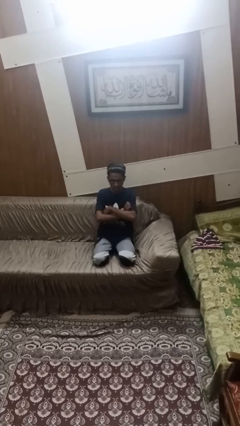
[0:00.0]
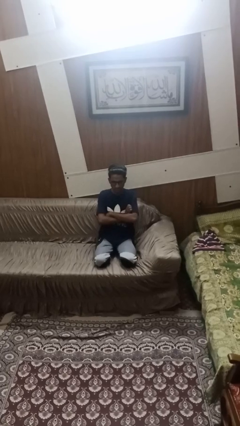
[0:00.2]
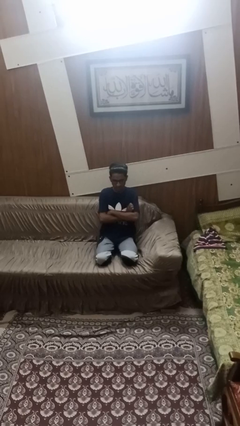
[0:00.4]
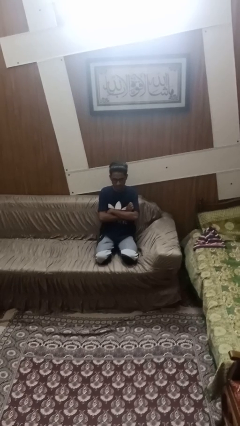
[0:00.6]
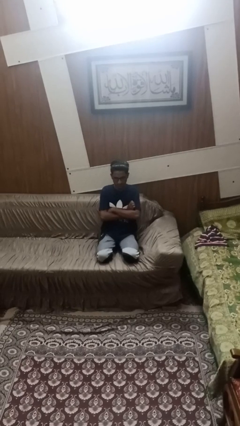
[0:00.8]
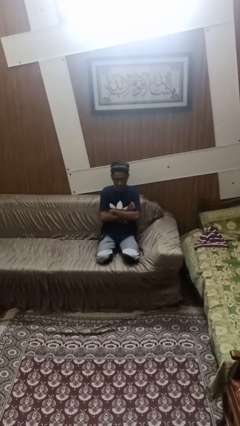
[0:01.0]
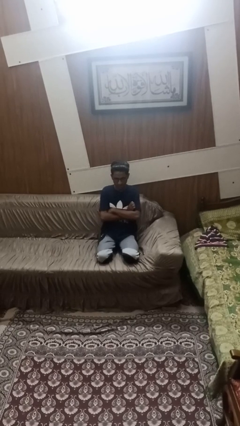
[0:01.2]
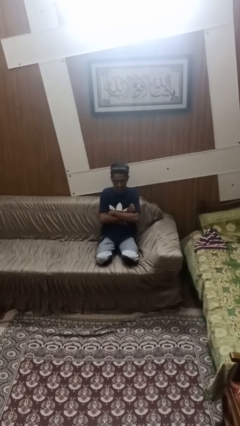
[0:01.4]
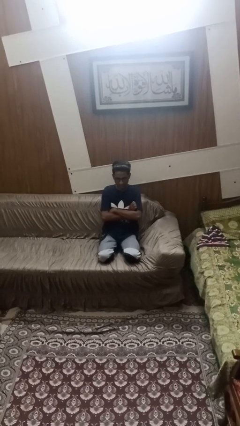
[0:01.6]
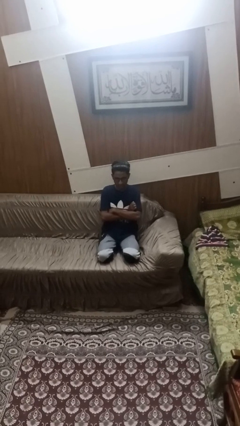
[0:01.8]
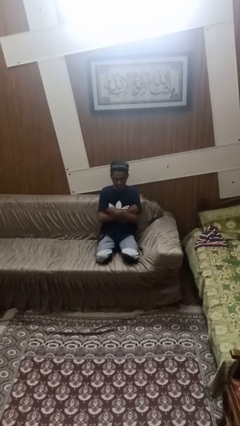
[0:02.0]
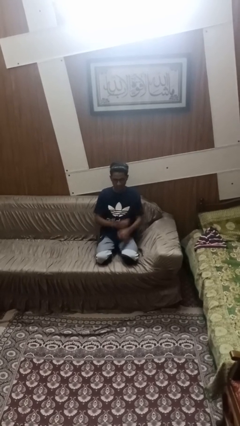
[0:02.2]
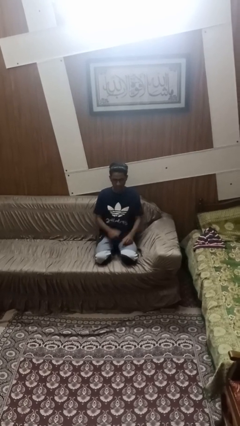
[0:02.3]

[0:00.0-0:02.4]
person crosses arms

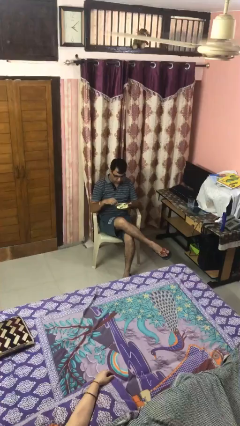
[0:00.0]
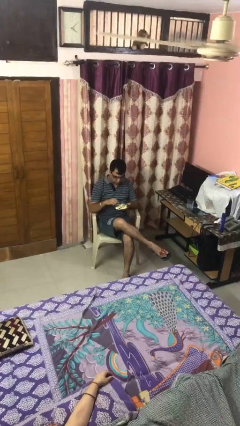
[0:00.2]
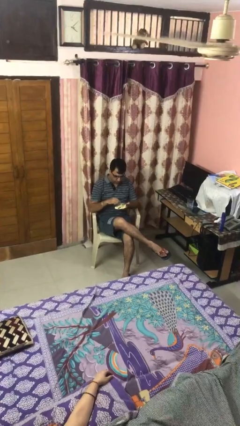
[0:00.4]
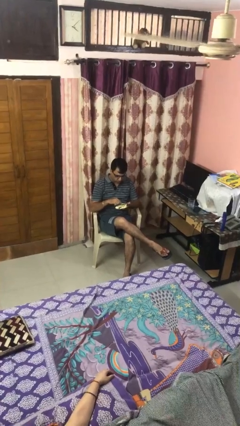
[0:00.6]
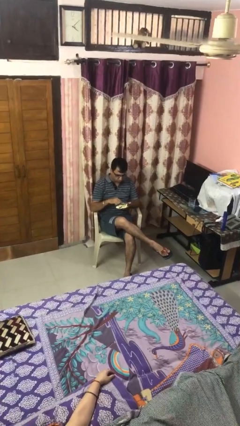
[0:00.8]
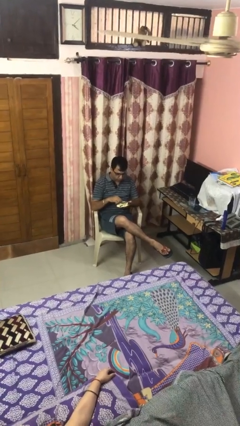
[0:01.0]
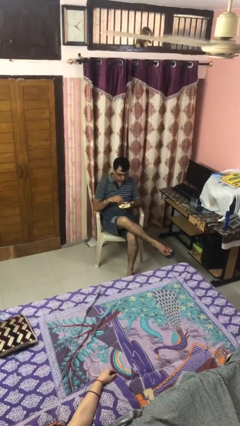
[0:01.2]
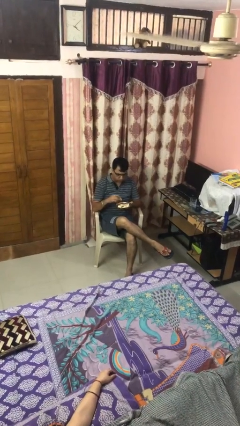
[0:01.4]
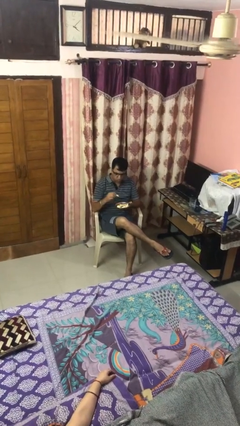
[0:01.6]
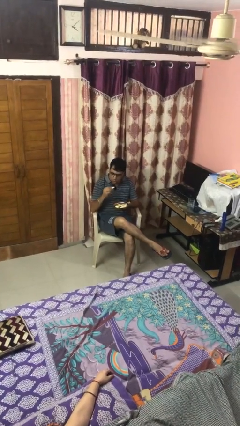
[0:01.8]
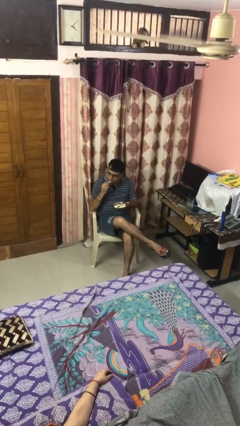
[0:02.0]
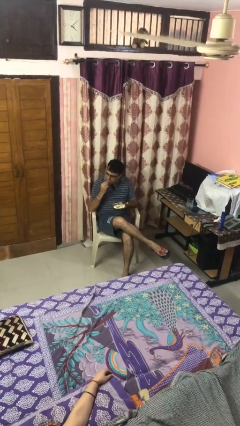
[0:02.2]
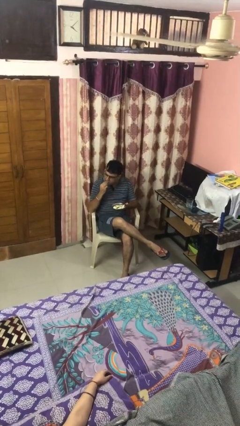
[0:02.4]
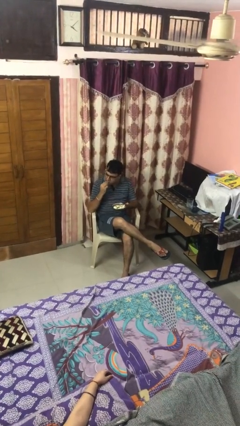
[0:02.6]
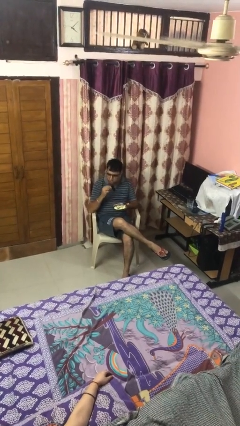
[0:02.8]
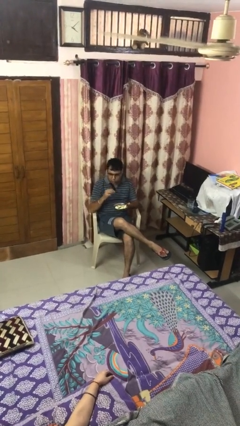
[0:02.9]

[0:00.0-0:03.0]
person eats with hands

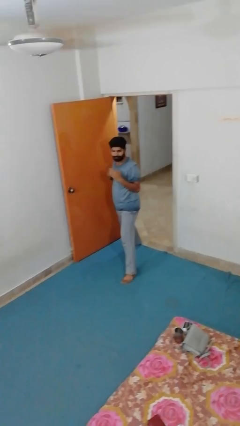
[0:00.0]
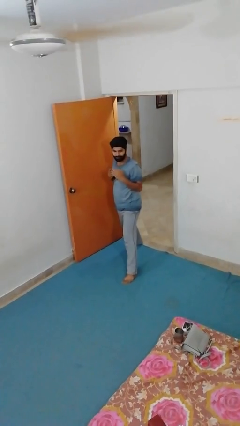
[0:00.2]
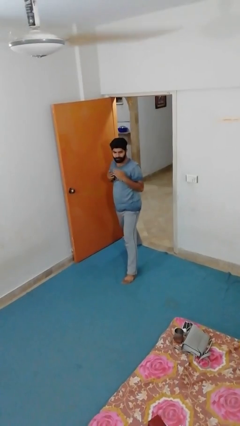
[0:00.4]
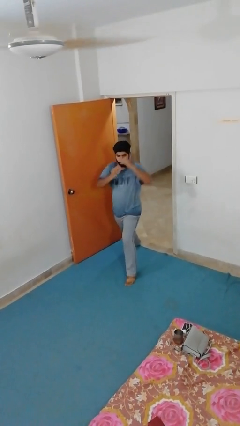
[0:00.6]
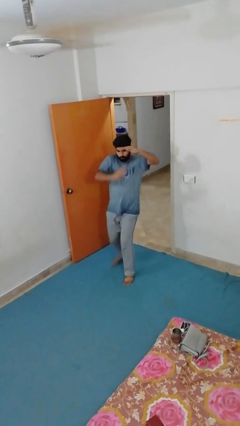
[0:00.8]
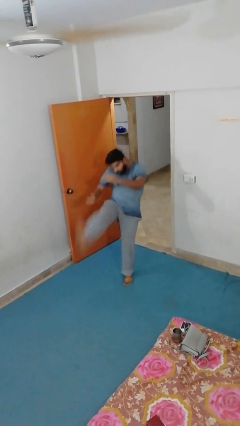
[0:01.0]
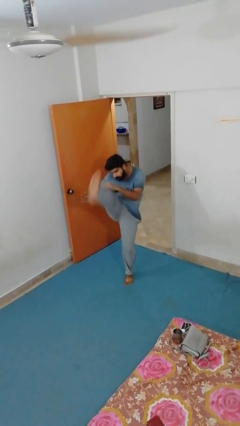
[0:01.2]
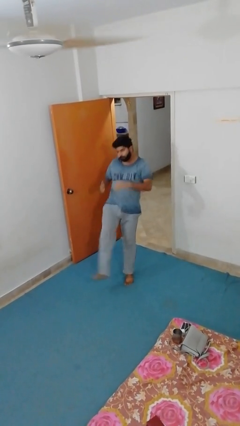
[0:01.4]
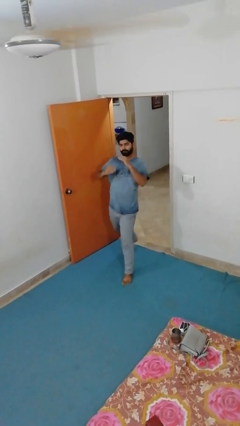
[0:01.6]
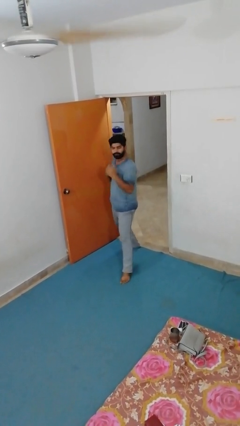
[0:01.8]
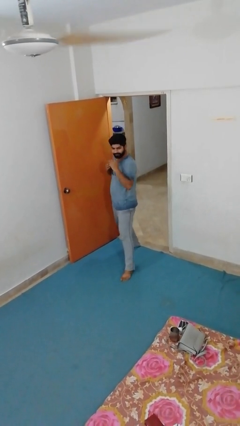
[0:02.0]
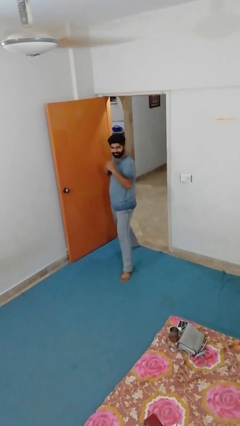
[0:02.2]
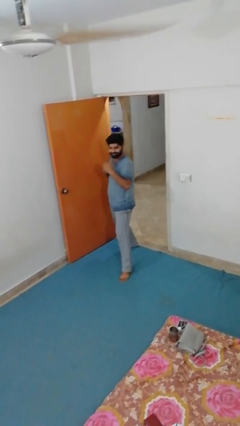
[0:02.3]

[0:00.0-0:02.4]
person karate kicks

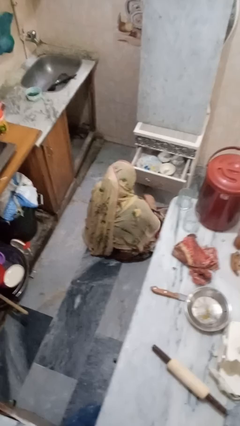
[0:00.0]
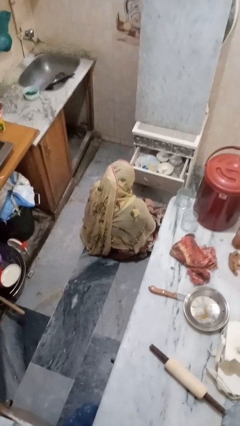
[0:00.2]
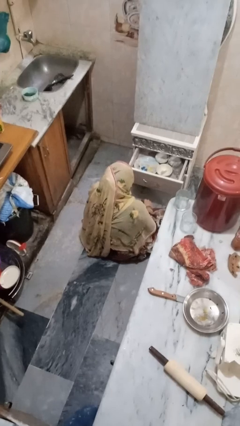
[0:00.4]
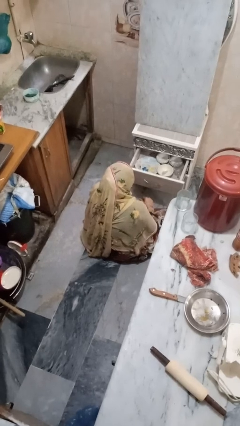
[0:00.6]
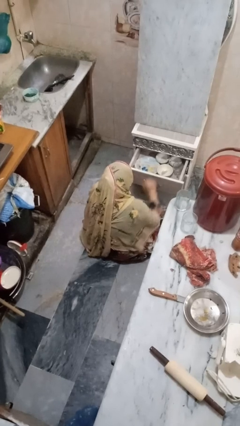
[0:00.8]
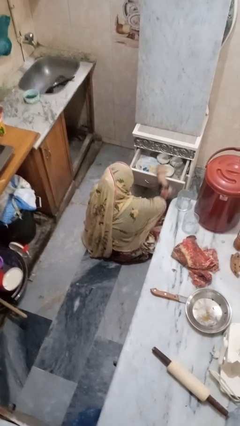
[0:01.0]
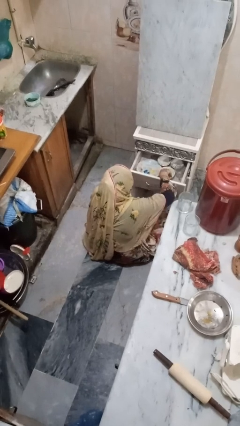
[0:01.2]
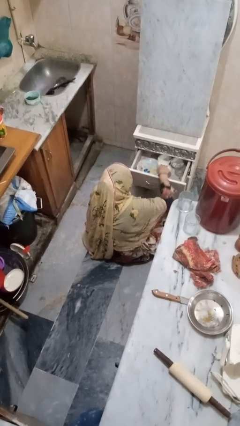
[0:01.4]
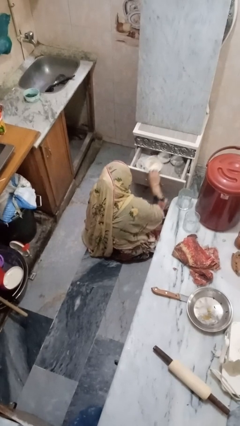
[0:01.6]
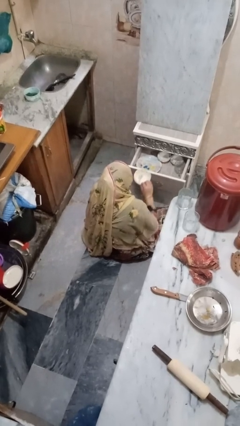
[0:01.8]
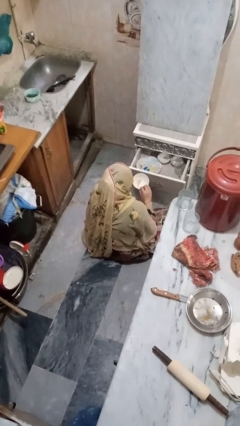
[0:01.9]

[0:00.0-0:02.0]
person takes object from kitchen drawer

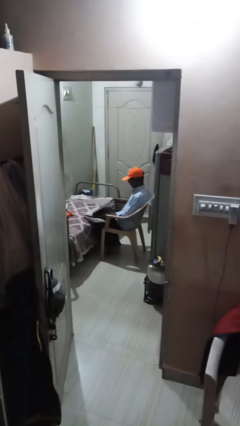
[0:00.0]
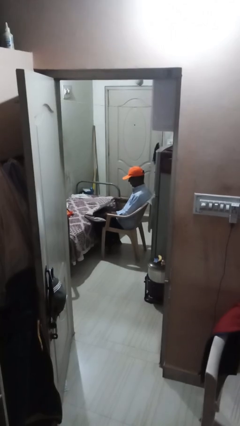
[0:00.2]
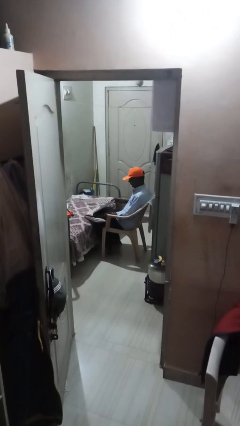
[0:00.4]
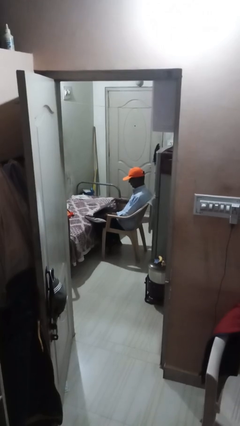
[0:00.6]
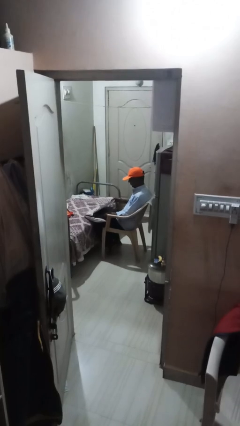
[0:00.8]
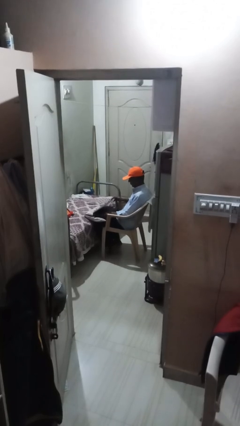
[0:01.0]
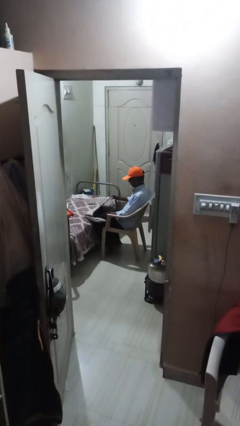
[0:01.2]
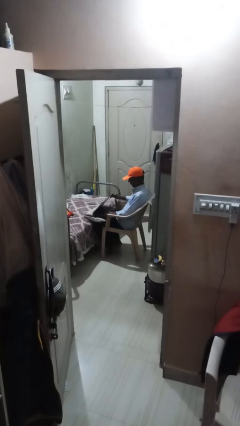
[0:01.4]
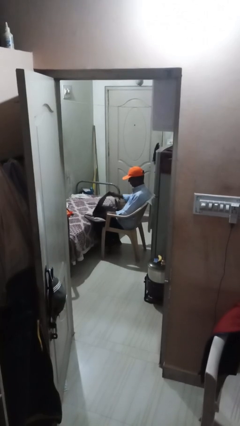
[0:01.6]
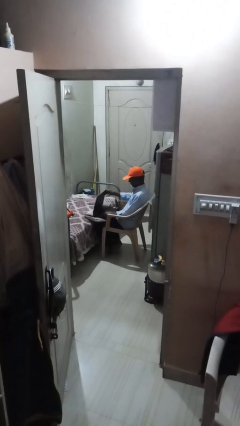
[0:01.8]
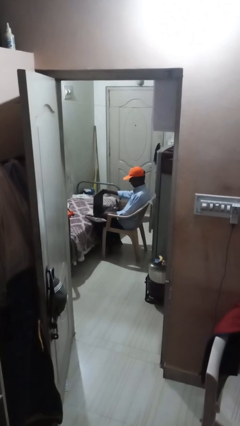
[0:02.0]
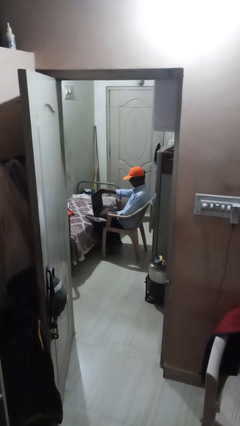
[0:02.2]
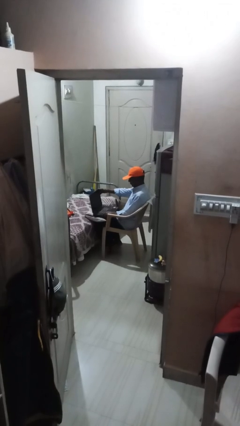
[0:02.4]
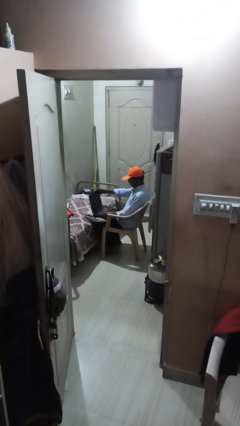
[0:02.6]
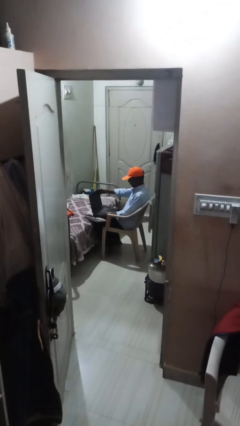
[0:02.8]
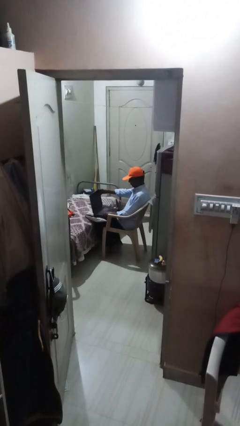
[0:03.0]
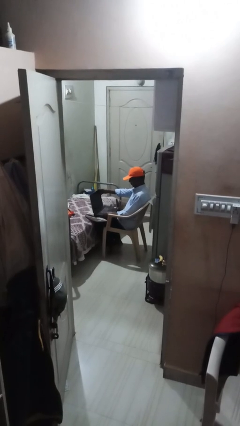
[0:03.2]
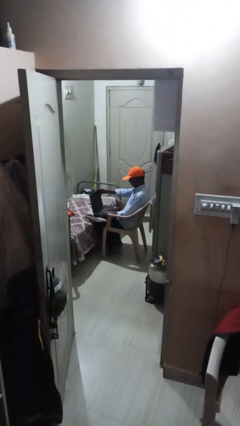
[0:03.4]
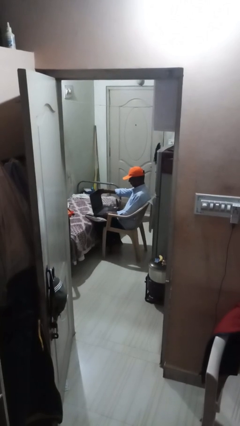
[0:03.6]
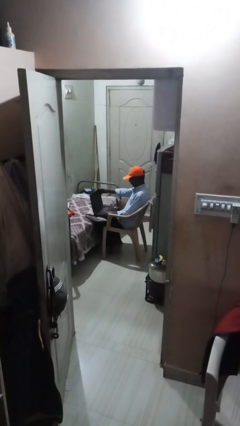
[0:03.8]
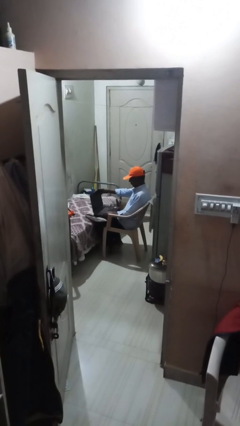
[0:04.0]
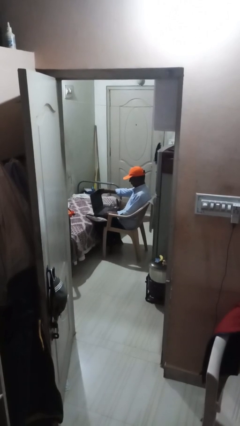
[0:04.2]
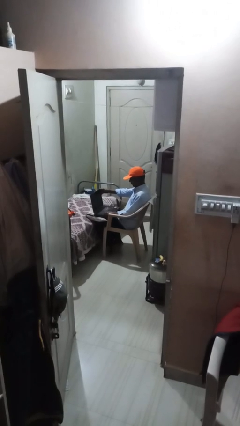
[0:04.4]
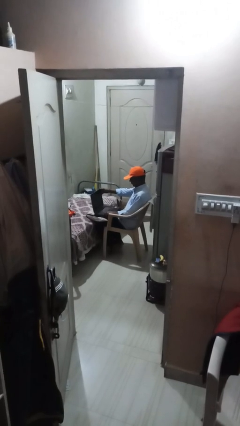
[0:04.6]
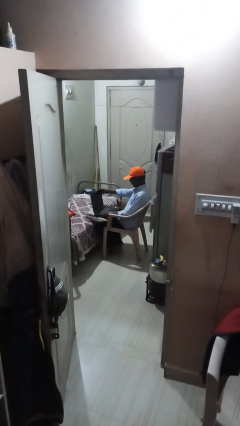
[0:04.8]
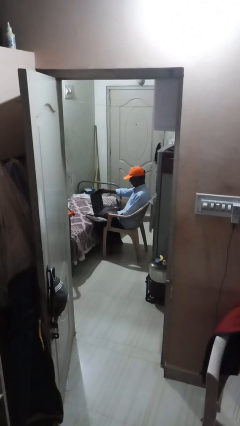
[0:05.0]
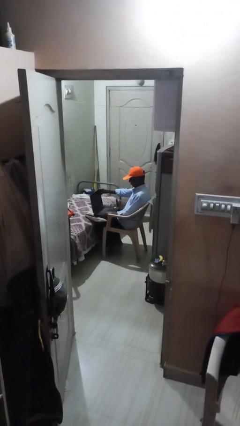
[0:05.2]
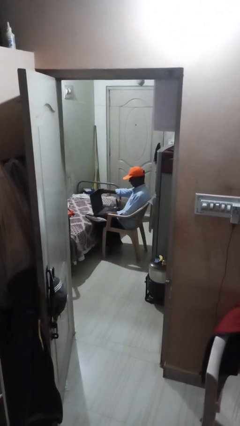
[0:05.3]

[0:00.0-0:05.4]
person interacts with laptop

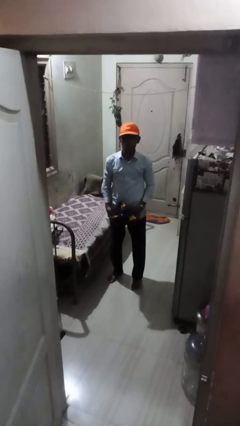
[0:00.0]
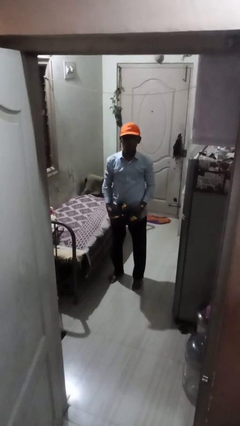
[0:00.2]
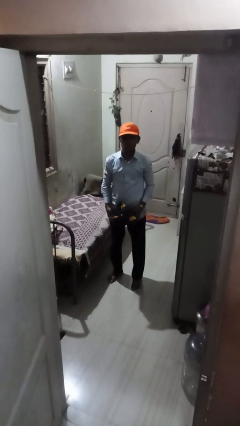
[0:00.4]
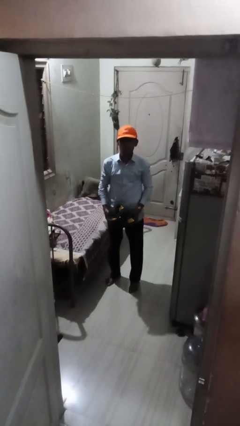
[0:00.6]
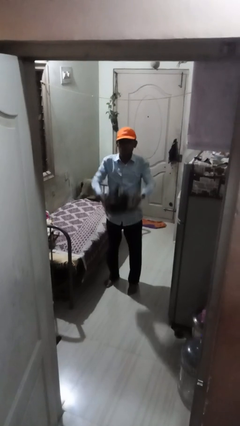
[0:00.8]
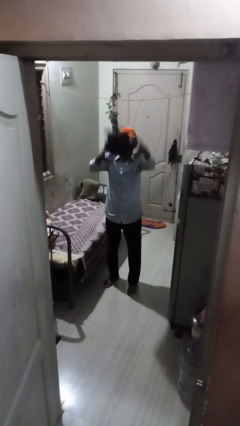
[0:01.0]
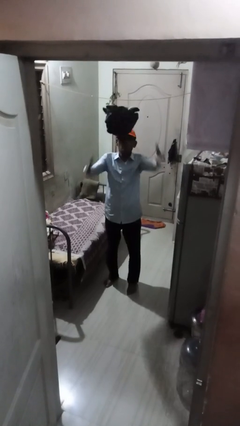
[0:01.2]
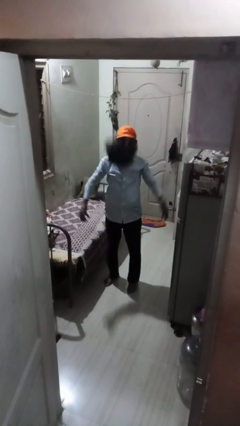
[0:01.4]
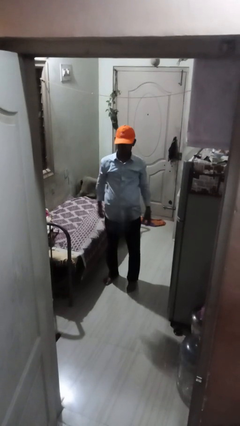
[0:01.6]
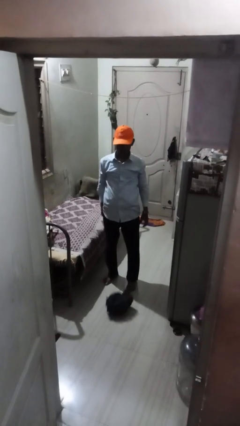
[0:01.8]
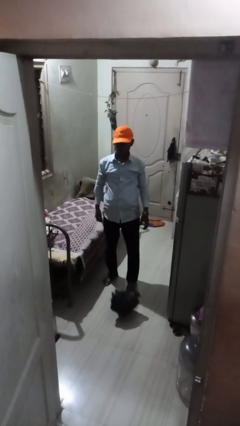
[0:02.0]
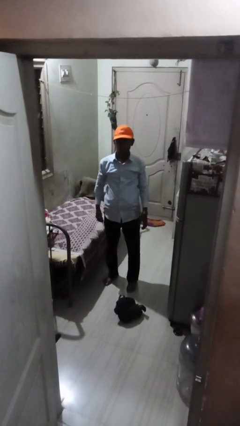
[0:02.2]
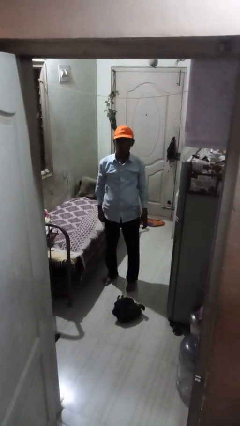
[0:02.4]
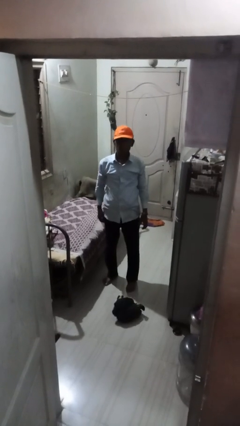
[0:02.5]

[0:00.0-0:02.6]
person throws object into air
